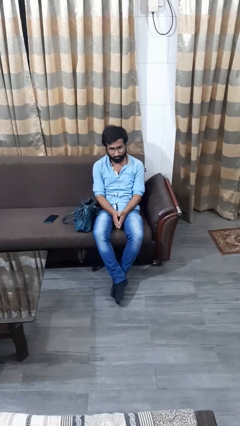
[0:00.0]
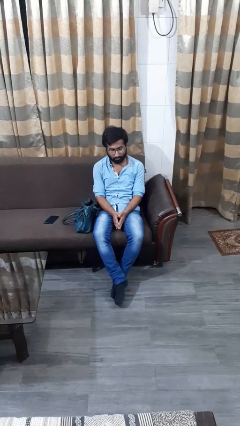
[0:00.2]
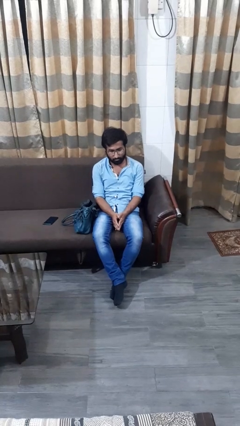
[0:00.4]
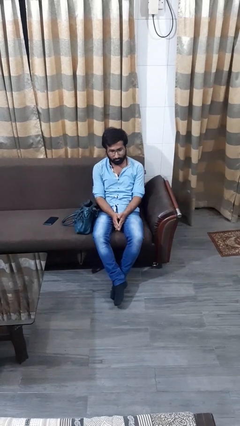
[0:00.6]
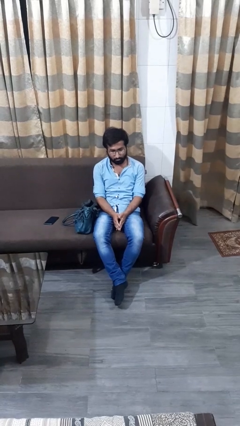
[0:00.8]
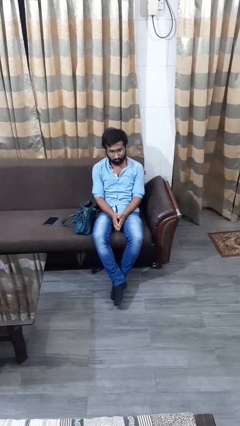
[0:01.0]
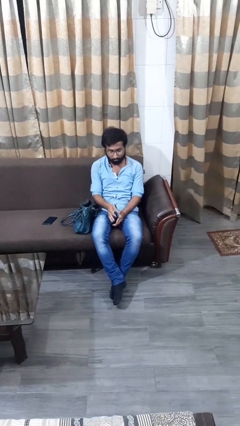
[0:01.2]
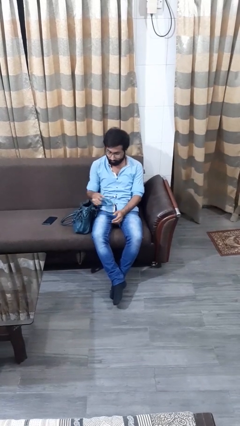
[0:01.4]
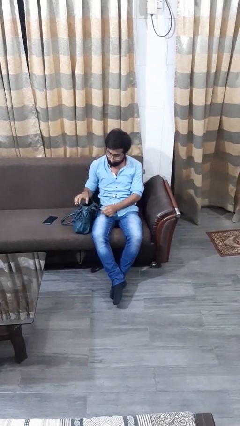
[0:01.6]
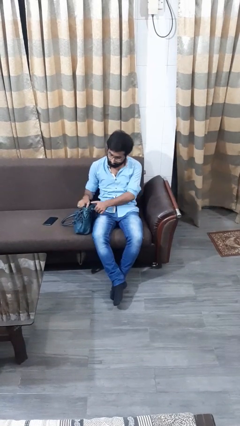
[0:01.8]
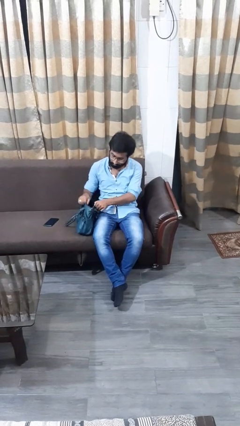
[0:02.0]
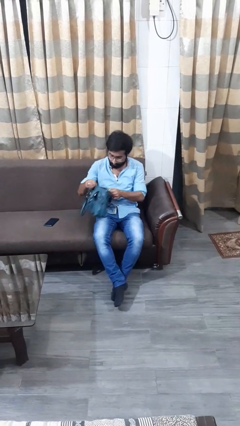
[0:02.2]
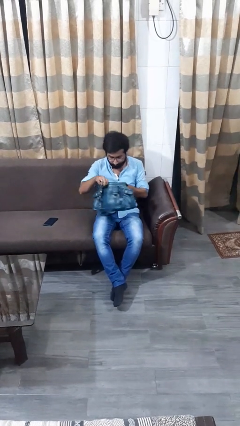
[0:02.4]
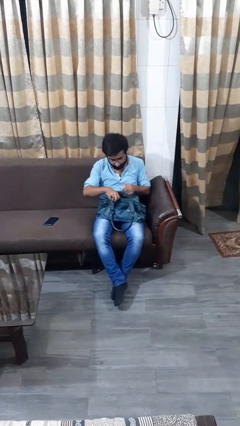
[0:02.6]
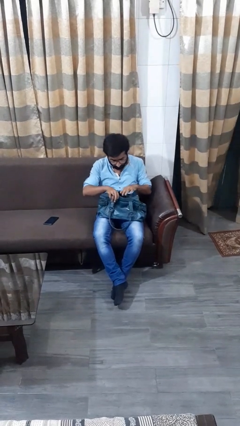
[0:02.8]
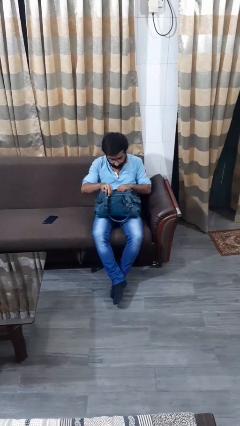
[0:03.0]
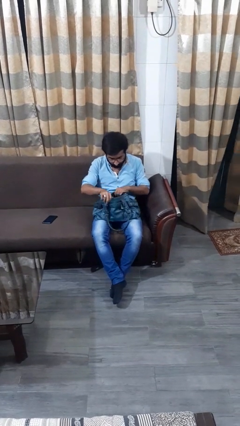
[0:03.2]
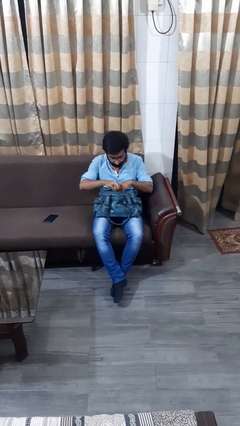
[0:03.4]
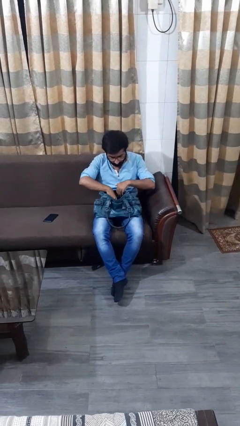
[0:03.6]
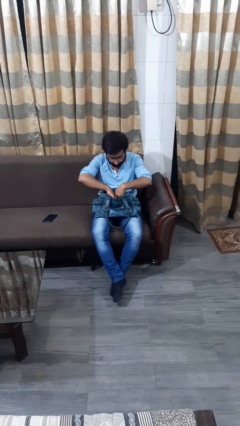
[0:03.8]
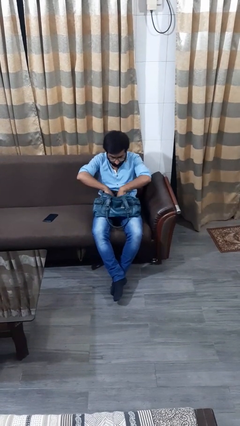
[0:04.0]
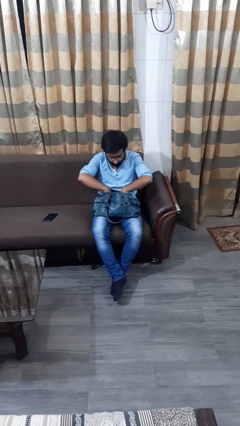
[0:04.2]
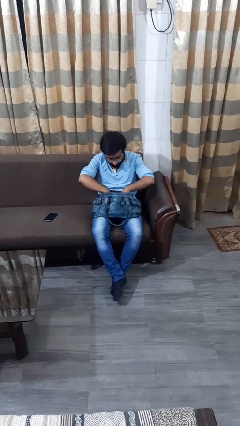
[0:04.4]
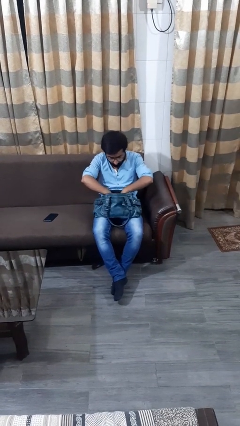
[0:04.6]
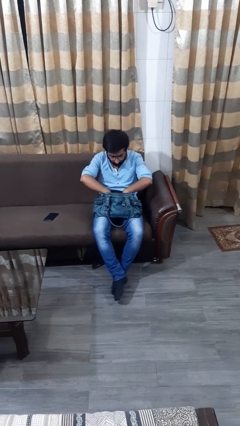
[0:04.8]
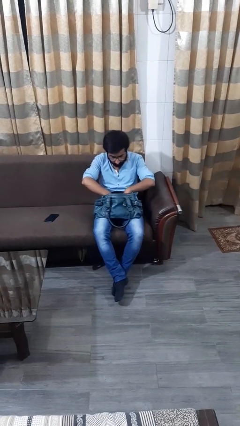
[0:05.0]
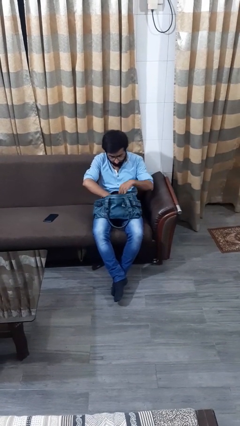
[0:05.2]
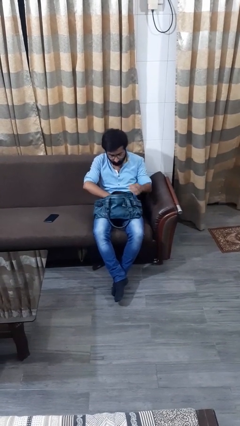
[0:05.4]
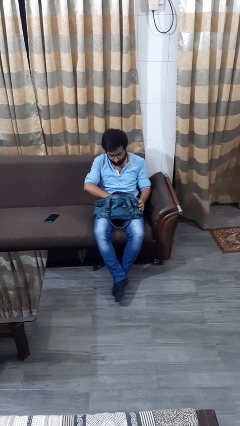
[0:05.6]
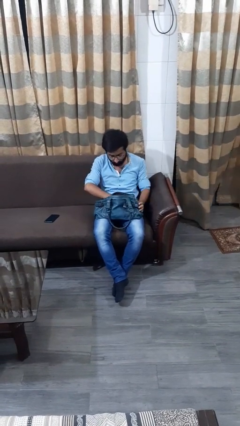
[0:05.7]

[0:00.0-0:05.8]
person searches in purse

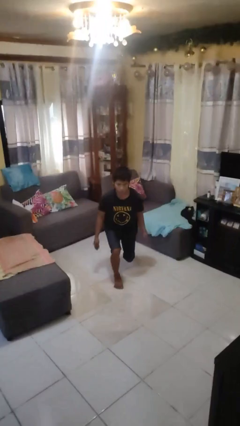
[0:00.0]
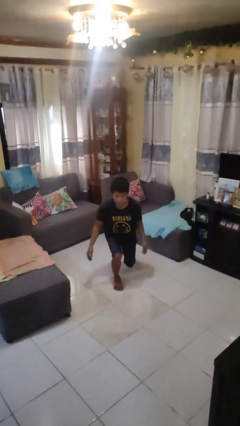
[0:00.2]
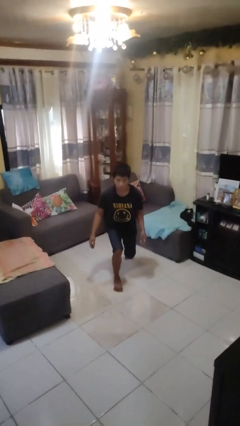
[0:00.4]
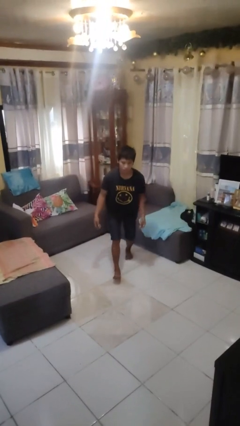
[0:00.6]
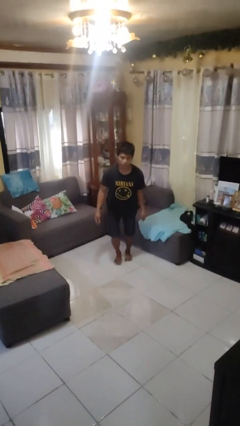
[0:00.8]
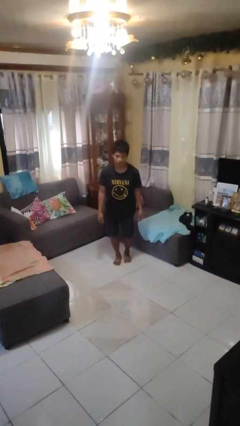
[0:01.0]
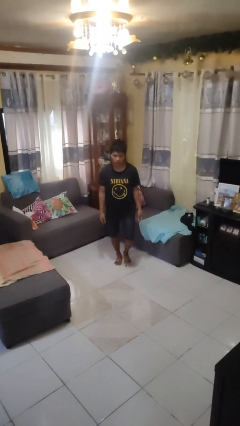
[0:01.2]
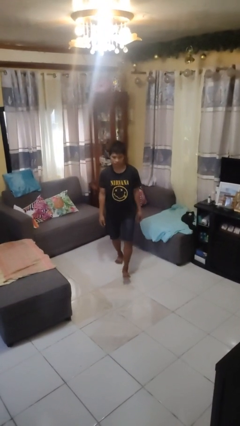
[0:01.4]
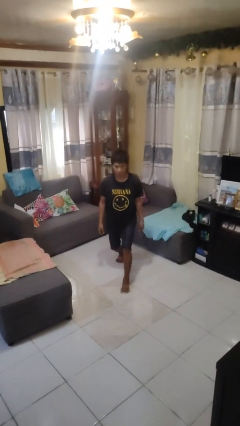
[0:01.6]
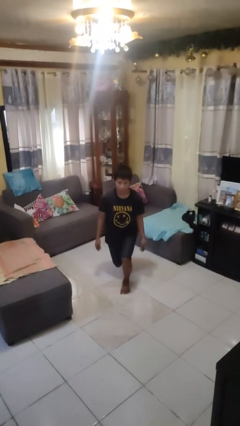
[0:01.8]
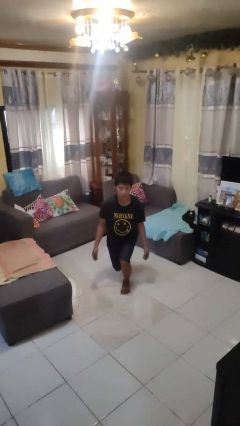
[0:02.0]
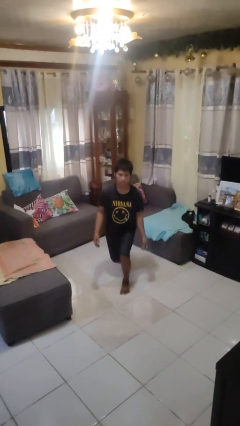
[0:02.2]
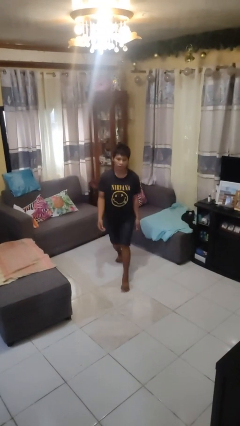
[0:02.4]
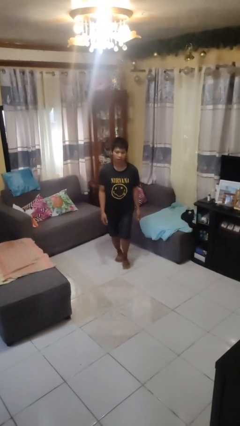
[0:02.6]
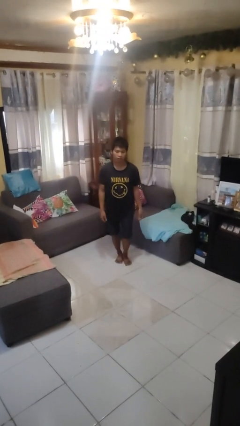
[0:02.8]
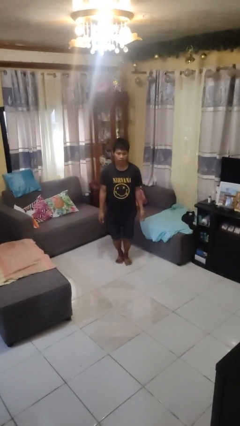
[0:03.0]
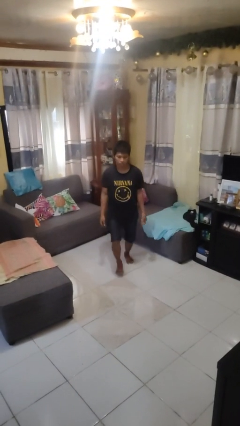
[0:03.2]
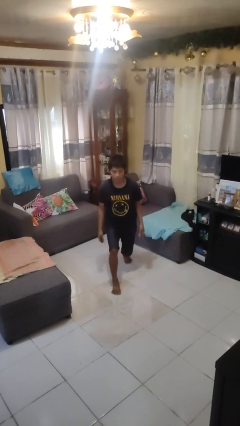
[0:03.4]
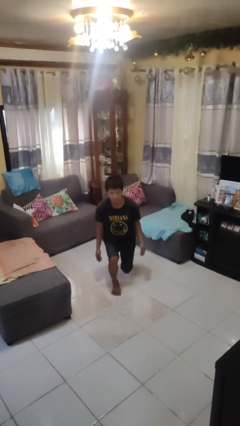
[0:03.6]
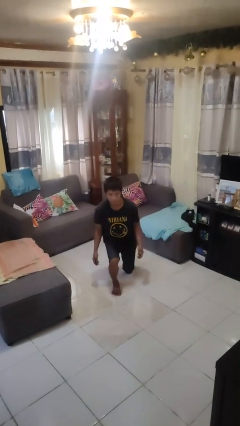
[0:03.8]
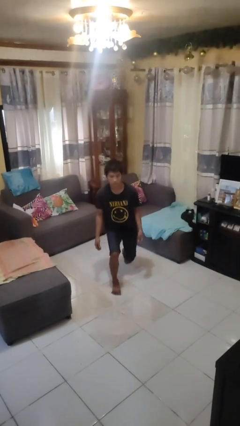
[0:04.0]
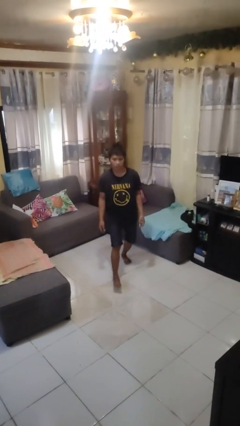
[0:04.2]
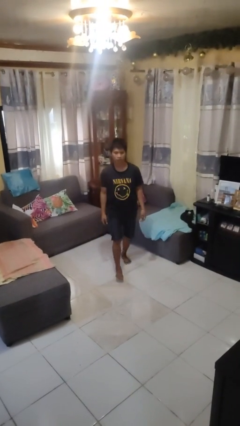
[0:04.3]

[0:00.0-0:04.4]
person exercises with lunges

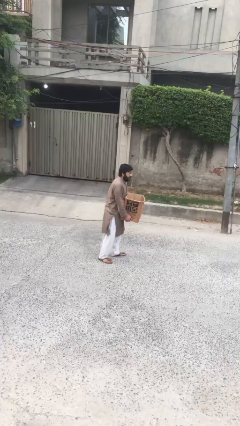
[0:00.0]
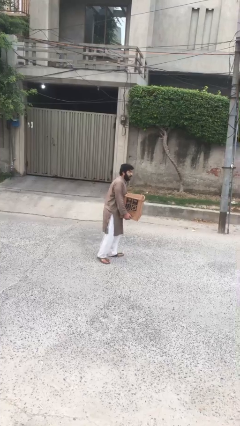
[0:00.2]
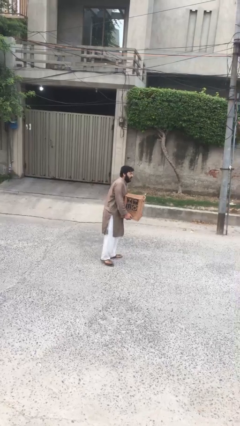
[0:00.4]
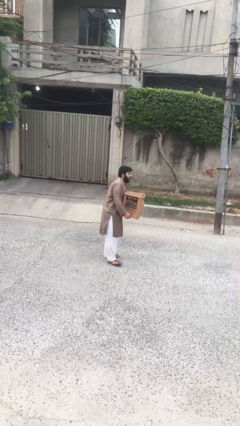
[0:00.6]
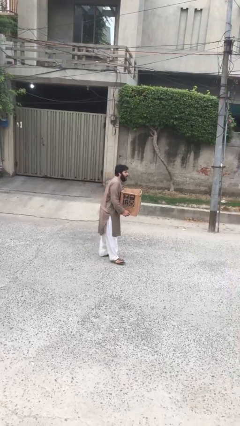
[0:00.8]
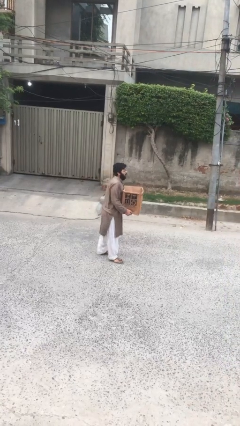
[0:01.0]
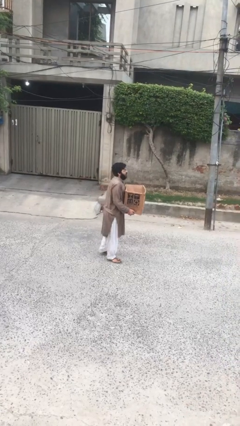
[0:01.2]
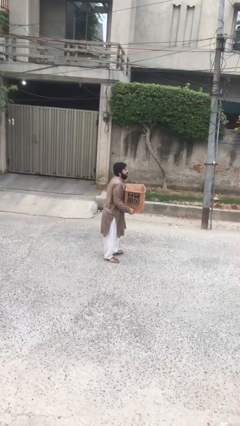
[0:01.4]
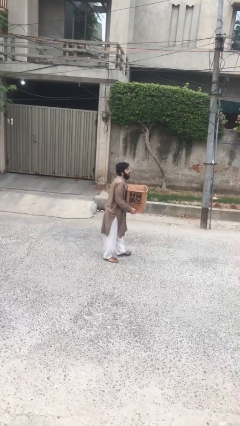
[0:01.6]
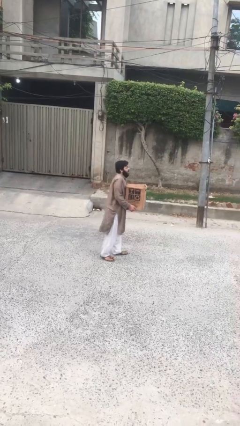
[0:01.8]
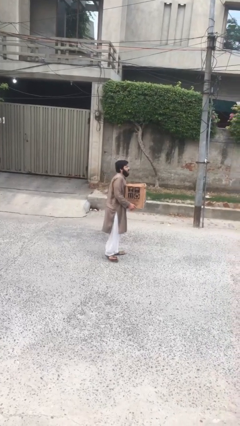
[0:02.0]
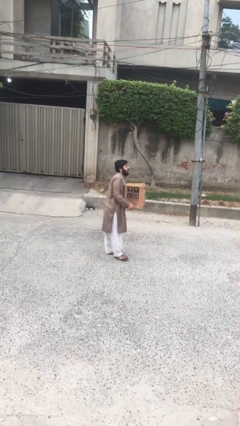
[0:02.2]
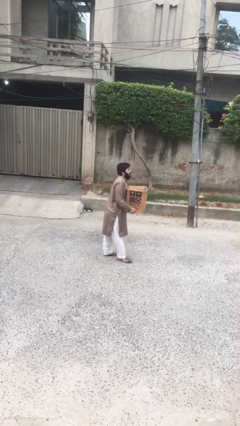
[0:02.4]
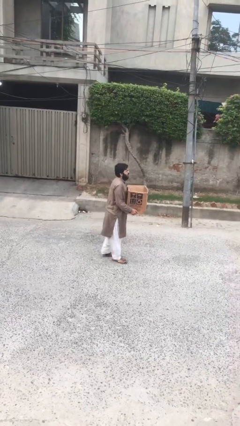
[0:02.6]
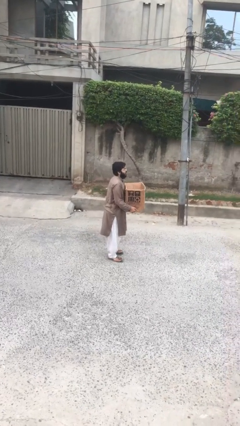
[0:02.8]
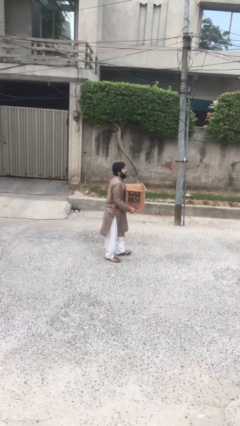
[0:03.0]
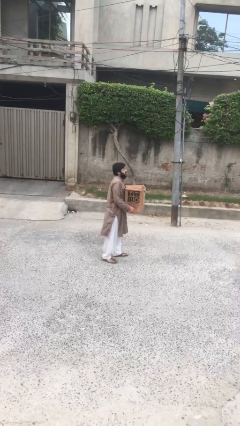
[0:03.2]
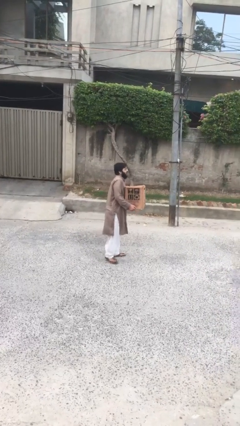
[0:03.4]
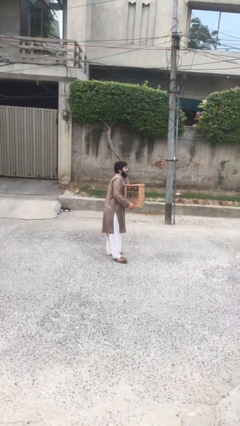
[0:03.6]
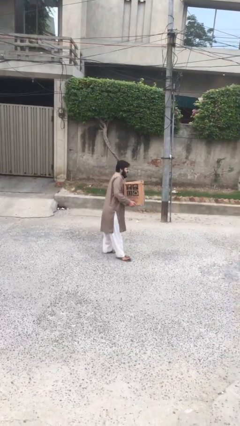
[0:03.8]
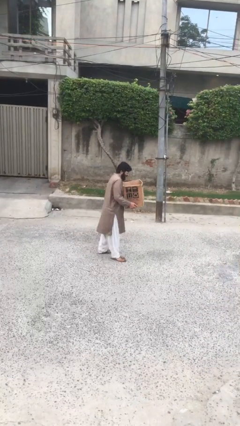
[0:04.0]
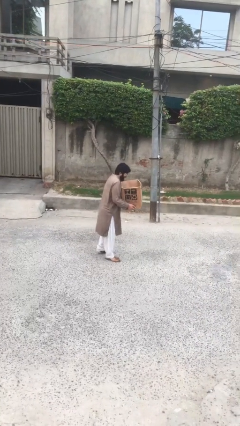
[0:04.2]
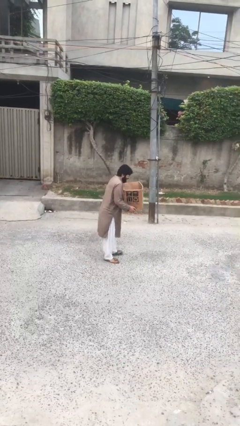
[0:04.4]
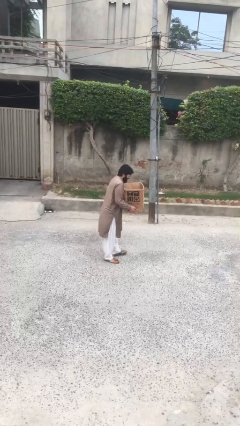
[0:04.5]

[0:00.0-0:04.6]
person carries heavy object

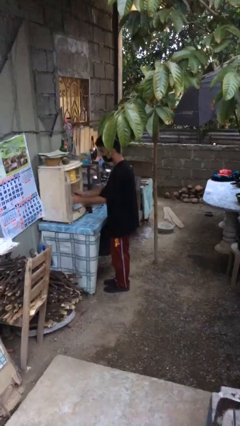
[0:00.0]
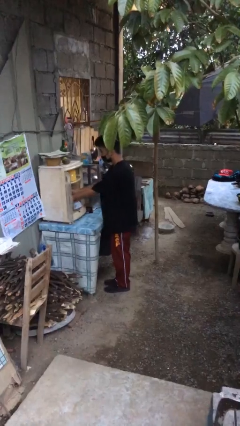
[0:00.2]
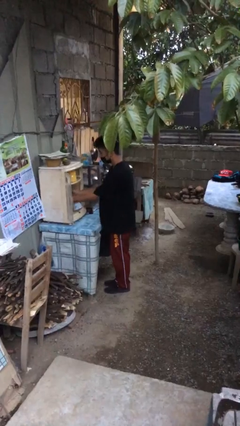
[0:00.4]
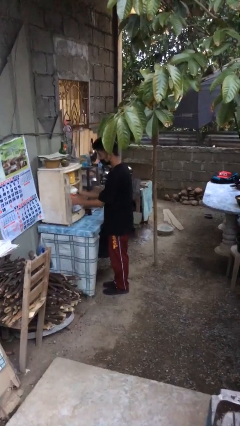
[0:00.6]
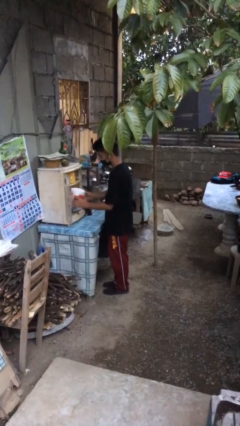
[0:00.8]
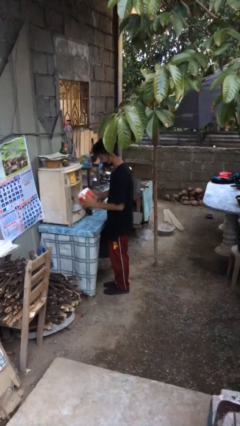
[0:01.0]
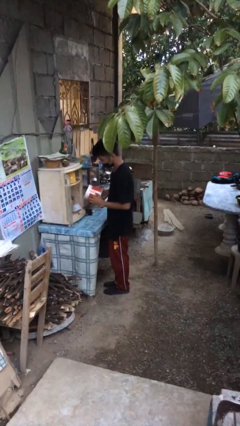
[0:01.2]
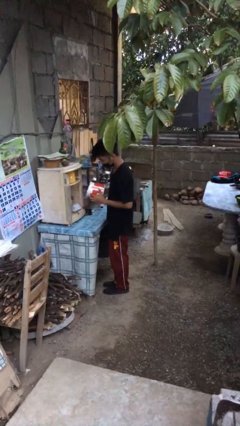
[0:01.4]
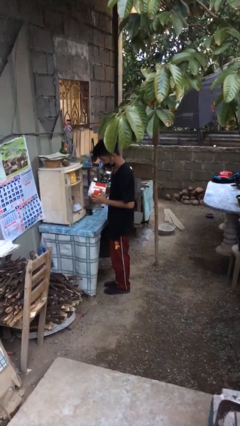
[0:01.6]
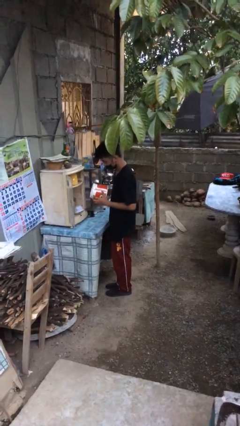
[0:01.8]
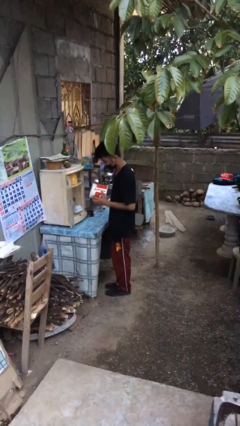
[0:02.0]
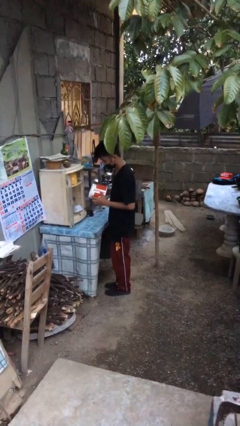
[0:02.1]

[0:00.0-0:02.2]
person picks up object from cabinet

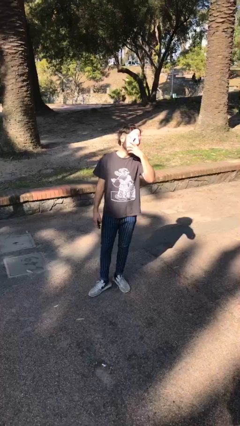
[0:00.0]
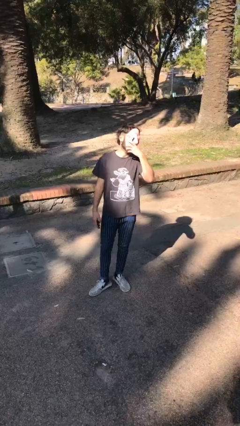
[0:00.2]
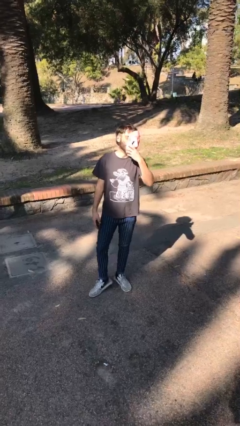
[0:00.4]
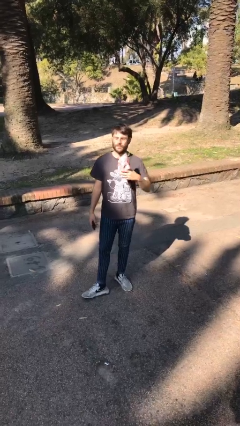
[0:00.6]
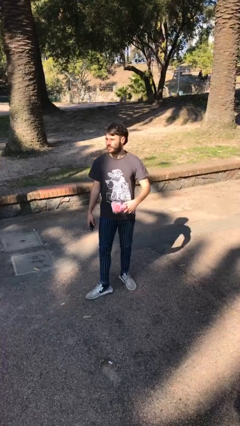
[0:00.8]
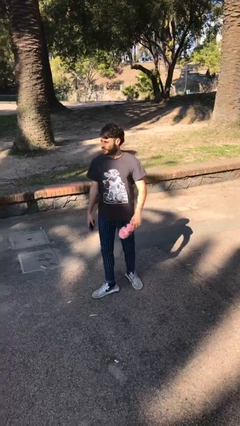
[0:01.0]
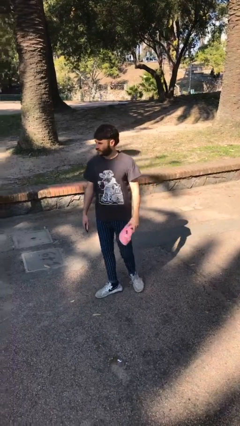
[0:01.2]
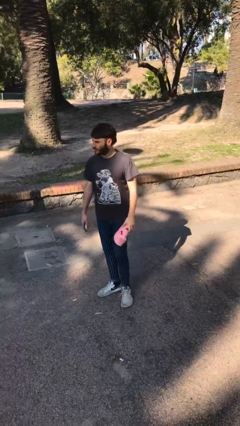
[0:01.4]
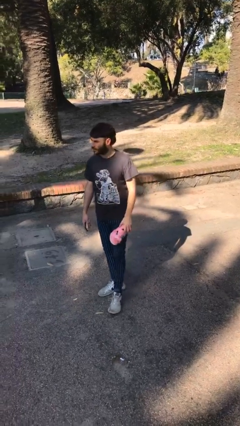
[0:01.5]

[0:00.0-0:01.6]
person takes off facemask
